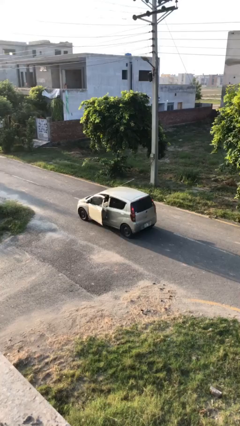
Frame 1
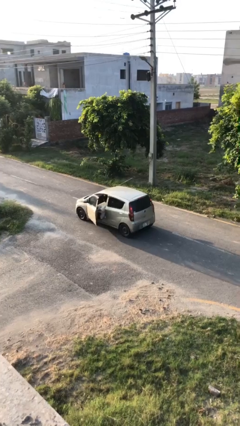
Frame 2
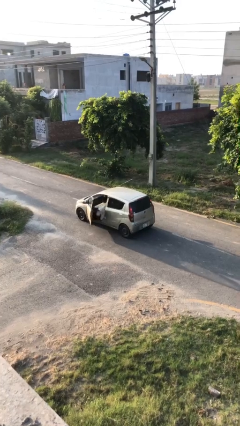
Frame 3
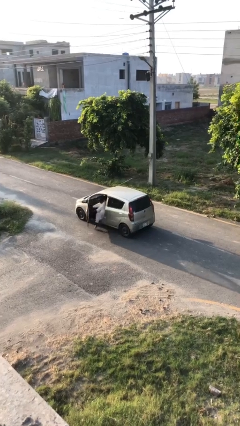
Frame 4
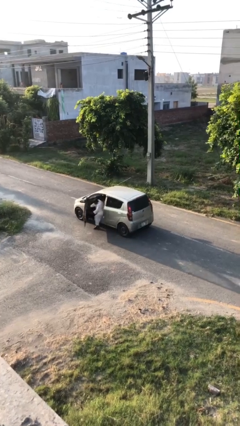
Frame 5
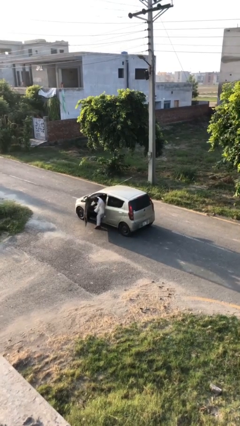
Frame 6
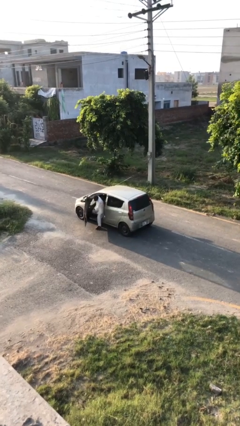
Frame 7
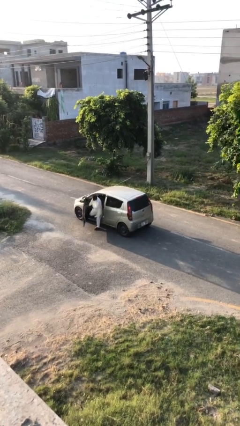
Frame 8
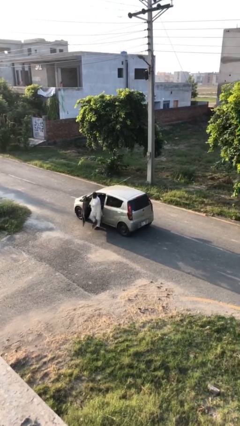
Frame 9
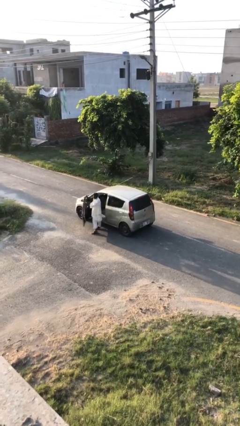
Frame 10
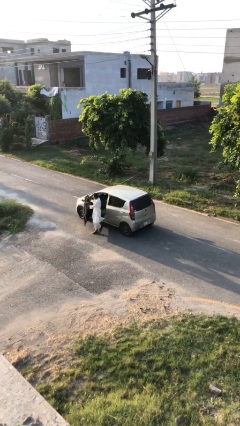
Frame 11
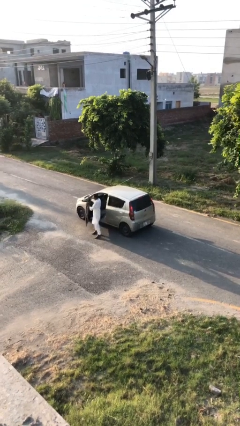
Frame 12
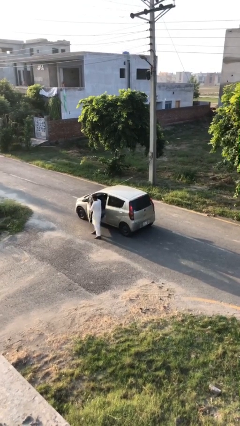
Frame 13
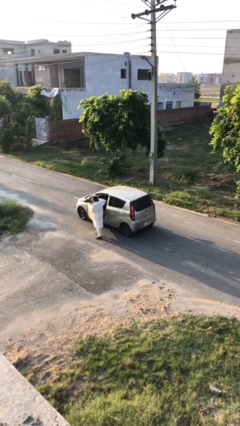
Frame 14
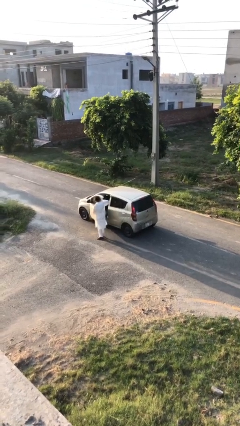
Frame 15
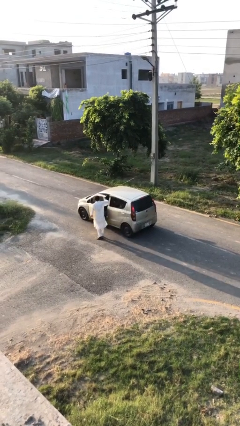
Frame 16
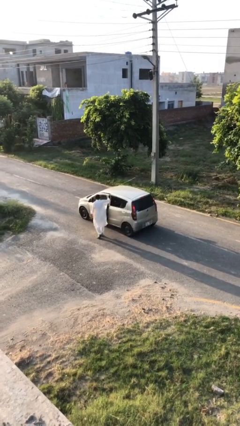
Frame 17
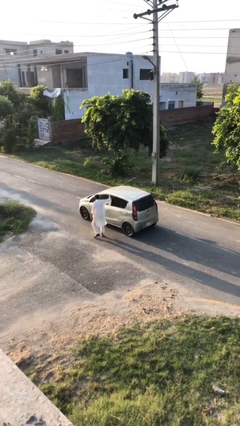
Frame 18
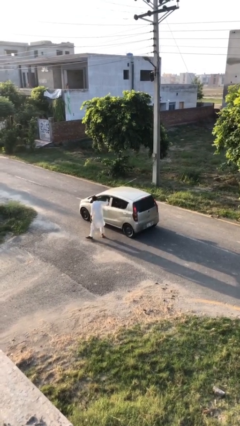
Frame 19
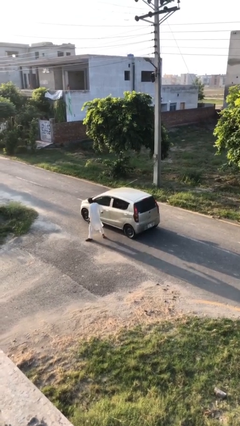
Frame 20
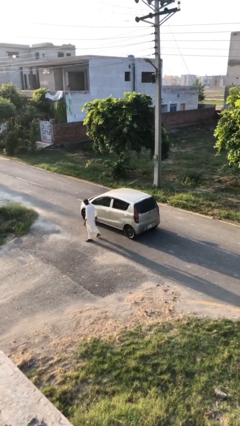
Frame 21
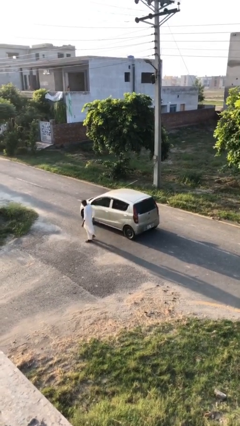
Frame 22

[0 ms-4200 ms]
car drops off person

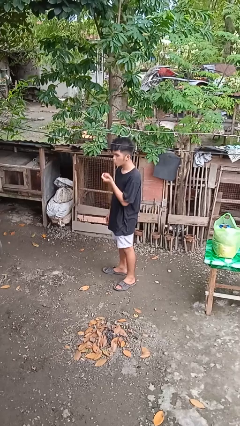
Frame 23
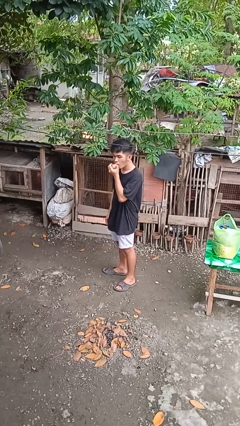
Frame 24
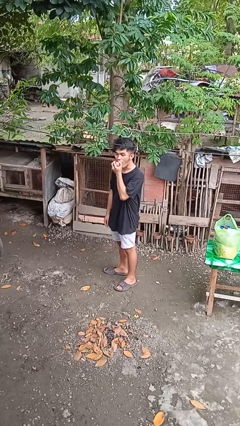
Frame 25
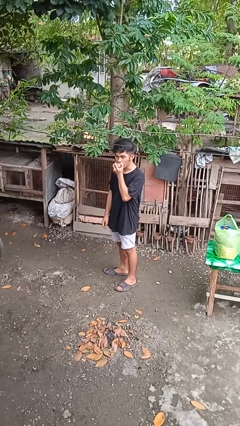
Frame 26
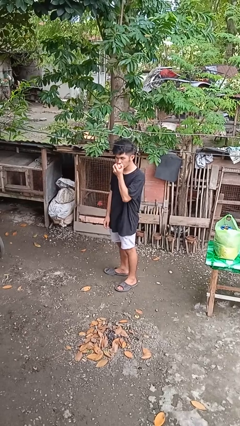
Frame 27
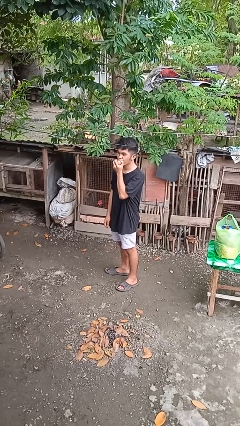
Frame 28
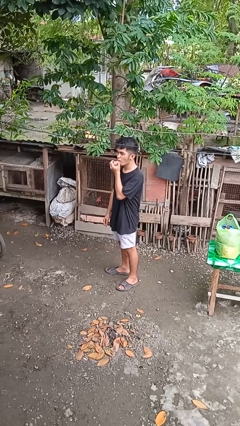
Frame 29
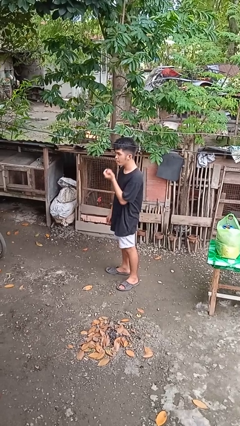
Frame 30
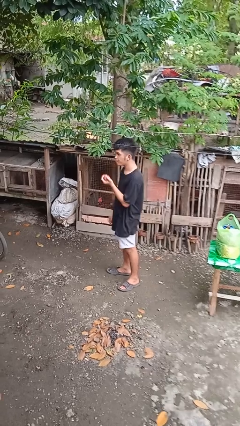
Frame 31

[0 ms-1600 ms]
person eats apple

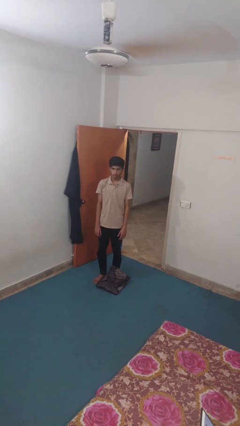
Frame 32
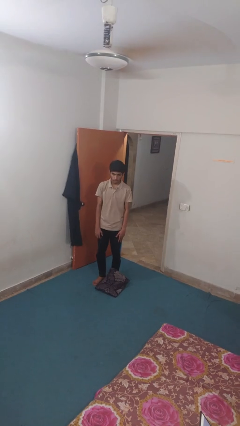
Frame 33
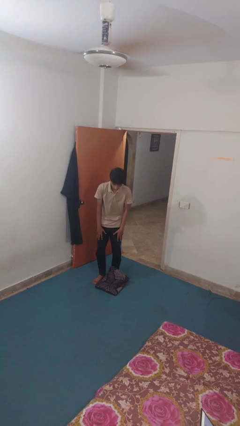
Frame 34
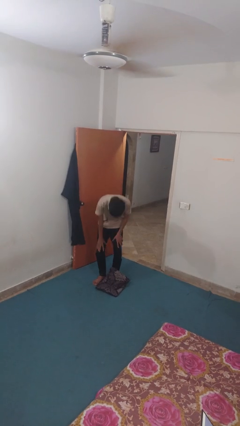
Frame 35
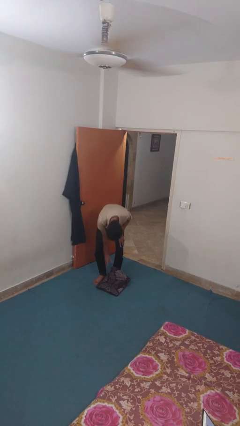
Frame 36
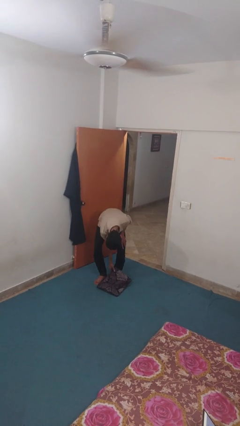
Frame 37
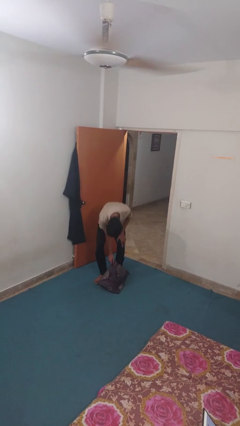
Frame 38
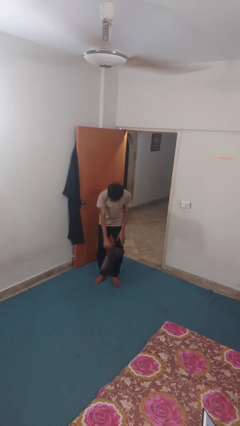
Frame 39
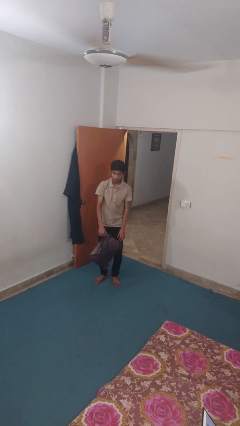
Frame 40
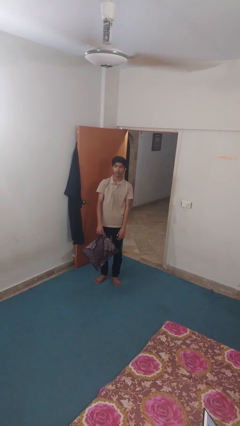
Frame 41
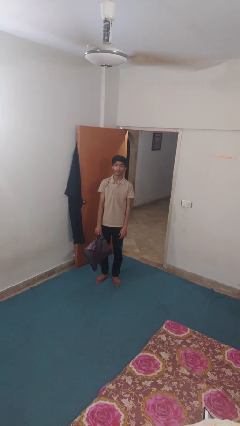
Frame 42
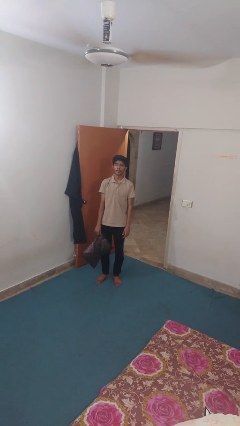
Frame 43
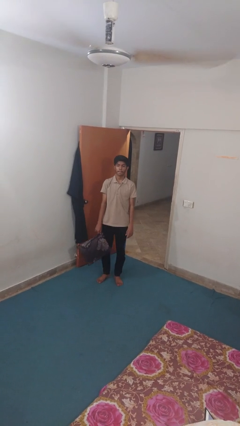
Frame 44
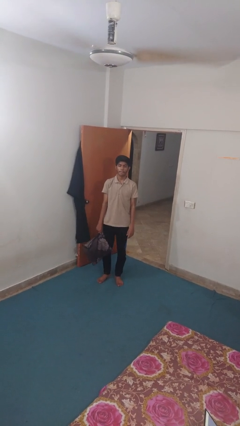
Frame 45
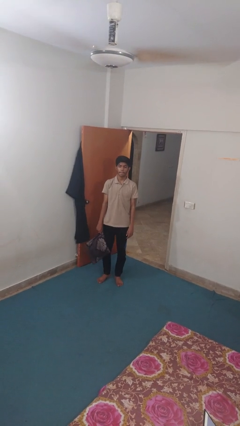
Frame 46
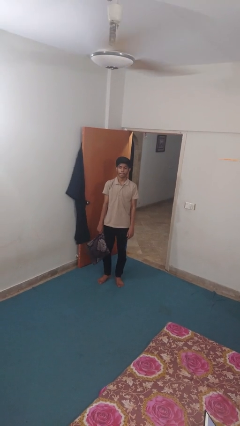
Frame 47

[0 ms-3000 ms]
person picks up object from floor

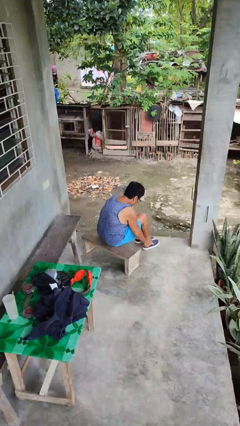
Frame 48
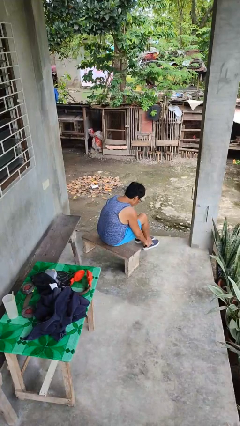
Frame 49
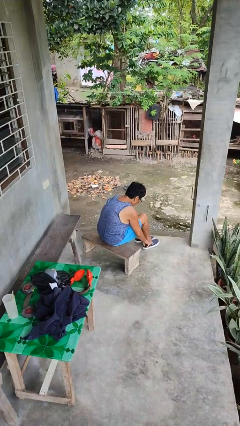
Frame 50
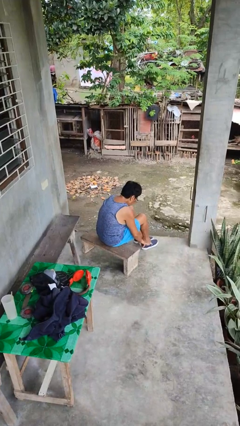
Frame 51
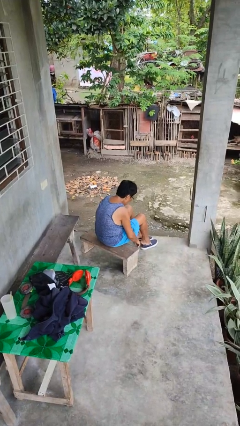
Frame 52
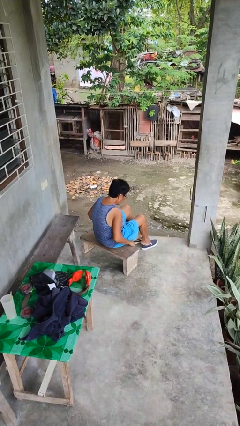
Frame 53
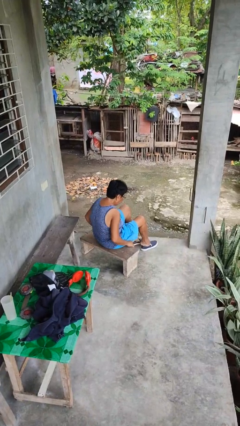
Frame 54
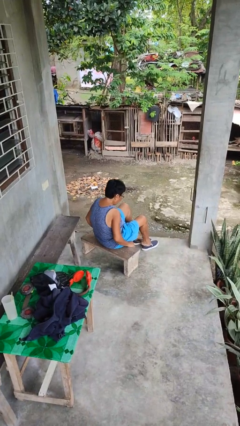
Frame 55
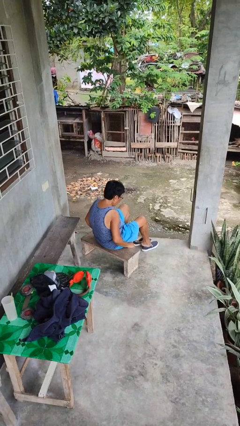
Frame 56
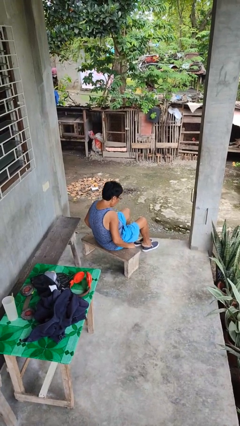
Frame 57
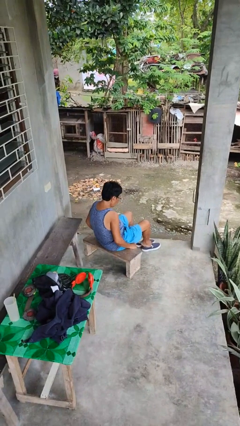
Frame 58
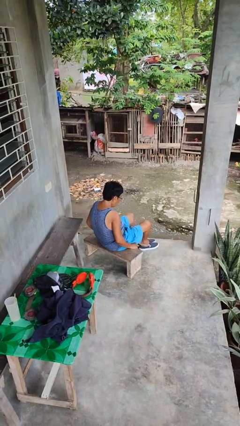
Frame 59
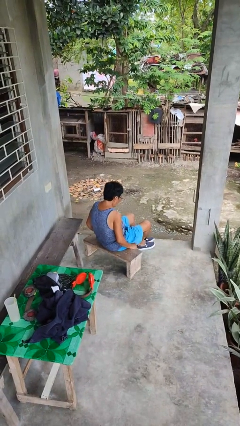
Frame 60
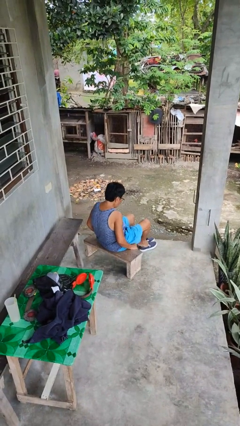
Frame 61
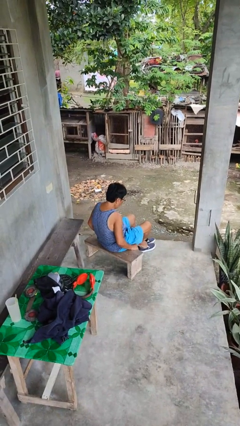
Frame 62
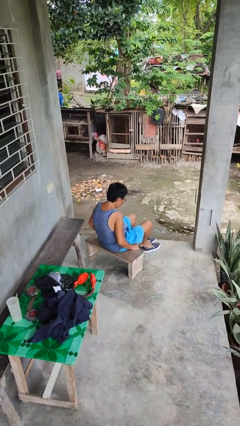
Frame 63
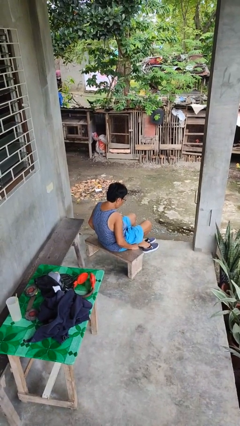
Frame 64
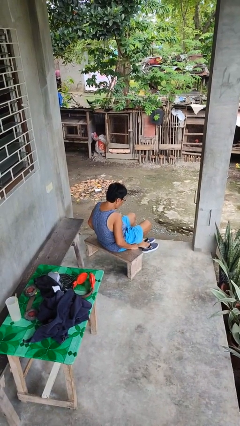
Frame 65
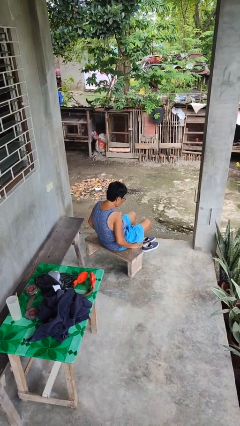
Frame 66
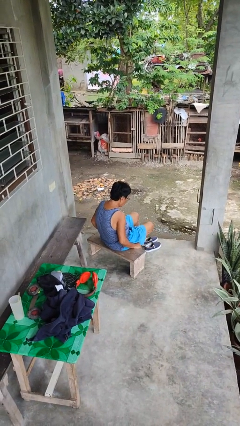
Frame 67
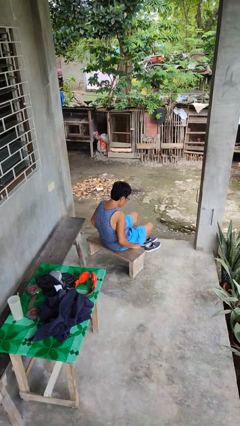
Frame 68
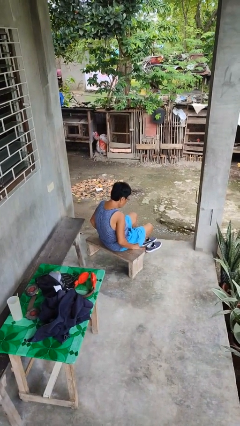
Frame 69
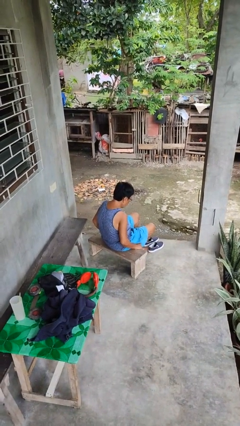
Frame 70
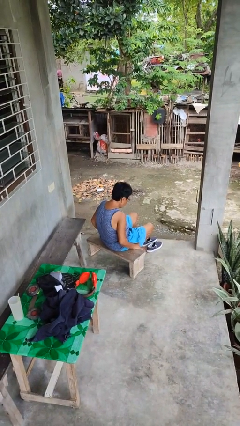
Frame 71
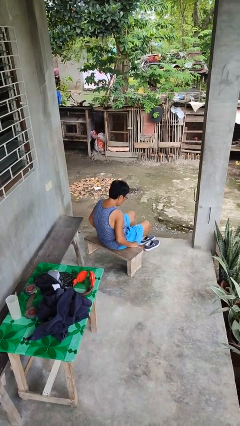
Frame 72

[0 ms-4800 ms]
person takes off shoes

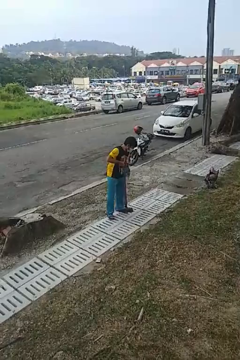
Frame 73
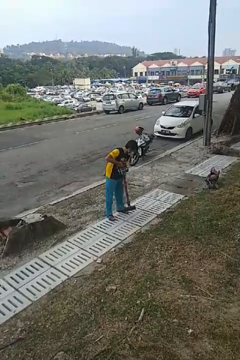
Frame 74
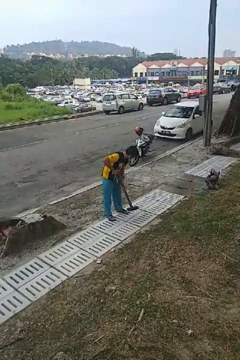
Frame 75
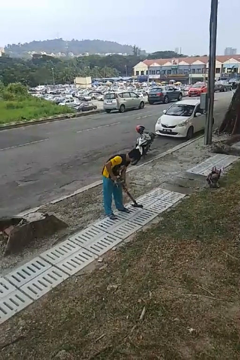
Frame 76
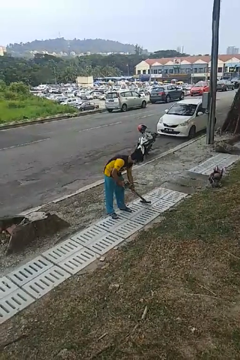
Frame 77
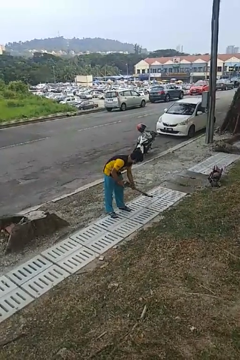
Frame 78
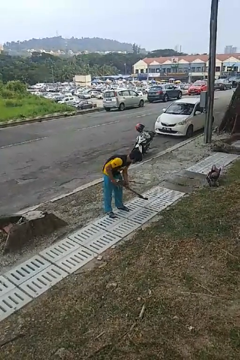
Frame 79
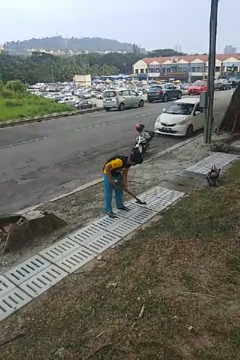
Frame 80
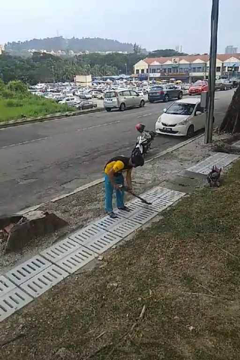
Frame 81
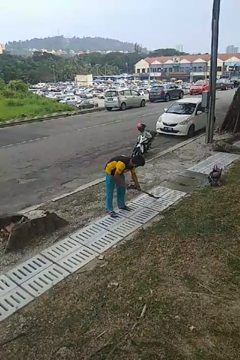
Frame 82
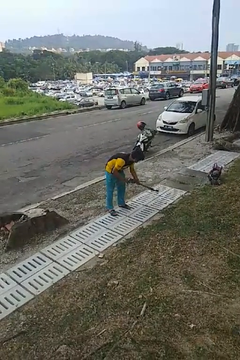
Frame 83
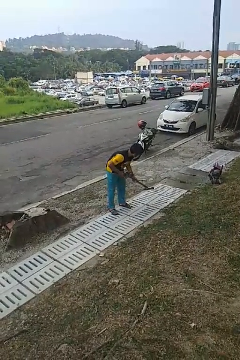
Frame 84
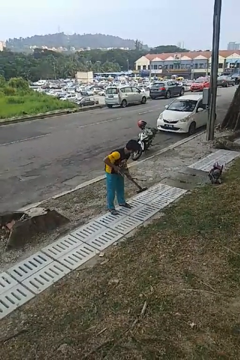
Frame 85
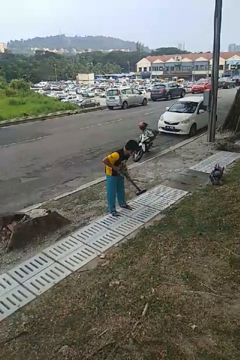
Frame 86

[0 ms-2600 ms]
person vacuums carpet

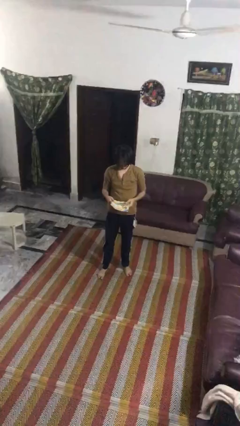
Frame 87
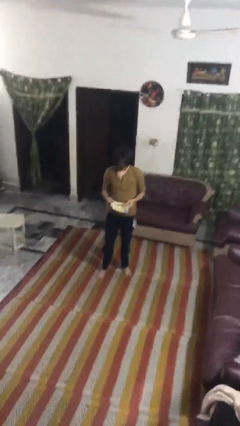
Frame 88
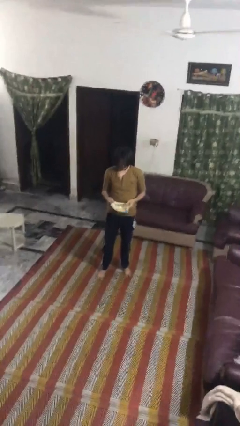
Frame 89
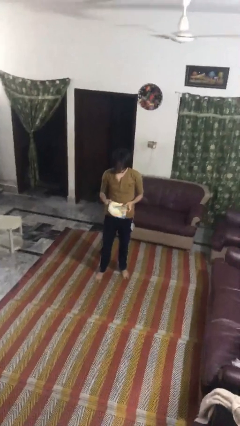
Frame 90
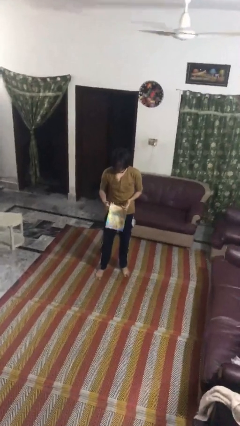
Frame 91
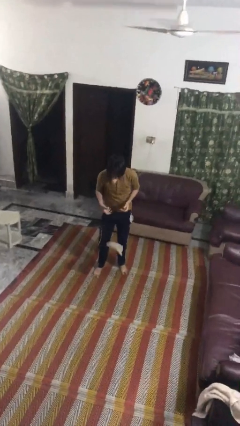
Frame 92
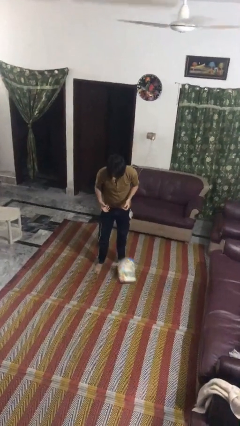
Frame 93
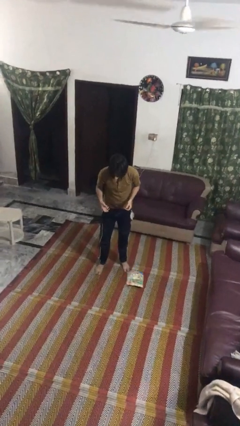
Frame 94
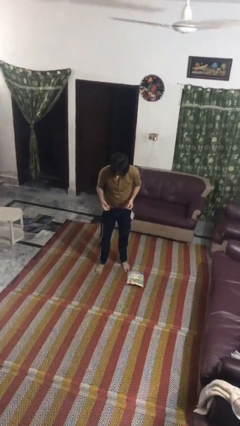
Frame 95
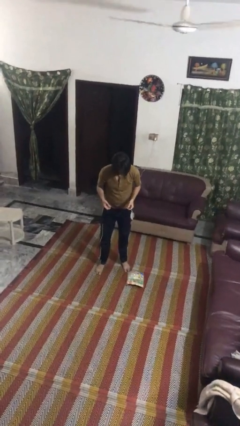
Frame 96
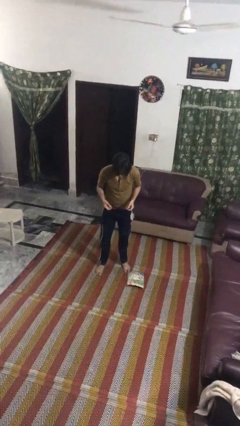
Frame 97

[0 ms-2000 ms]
person drops object
